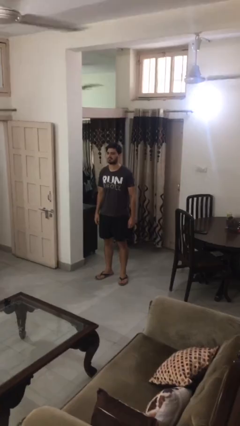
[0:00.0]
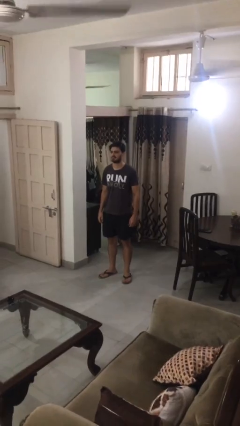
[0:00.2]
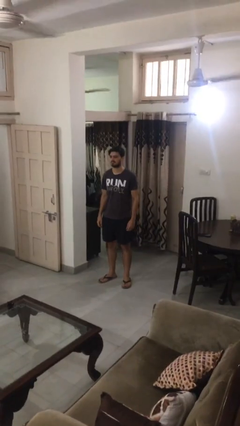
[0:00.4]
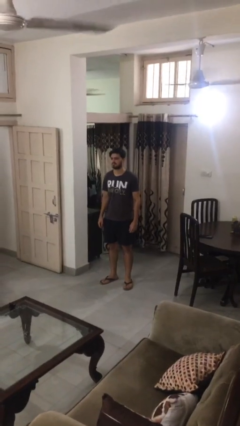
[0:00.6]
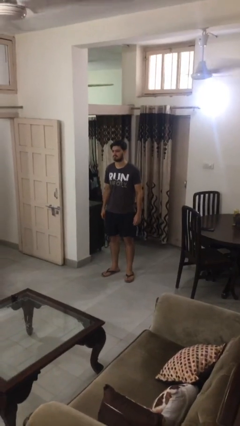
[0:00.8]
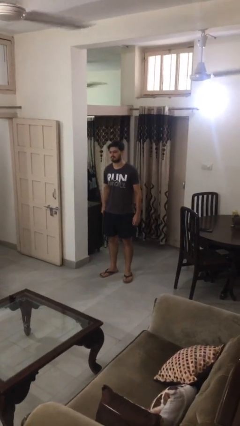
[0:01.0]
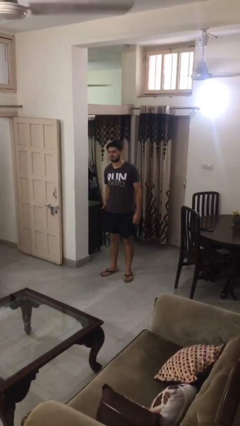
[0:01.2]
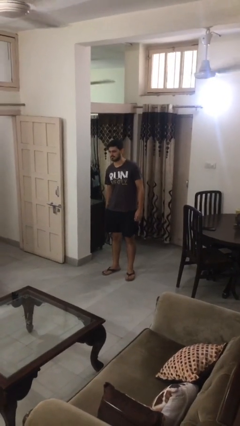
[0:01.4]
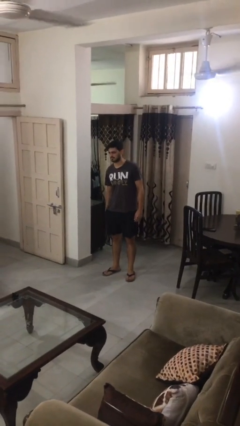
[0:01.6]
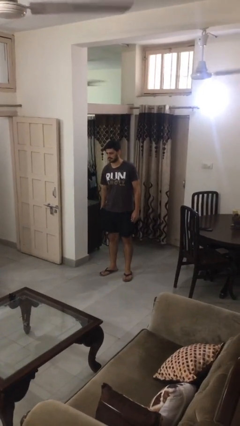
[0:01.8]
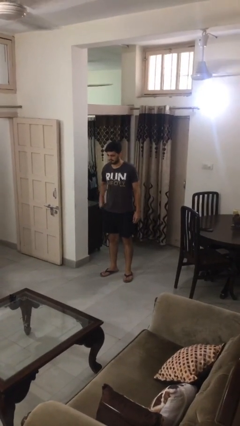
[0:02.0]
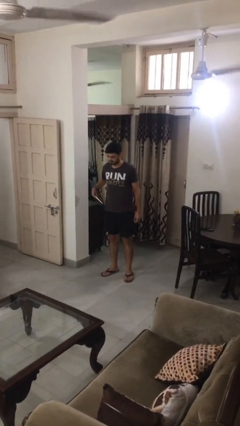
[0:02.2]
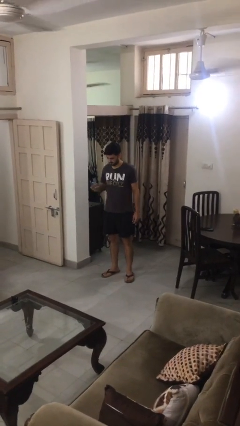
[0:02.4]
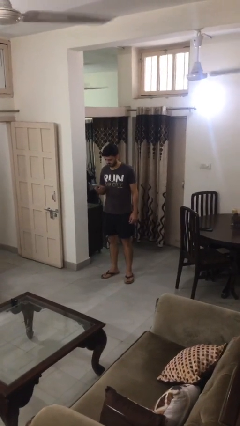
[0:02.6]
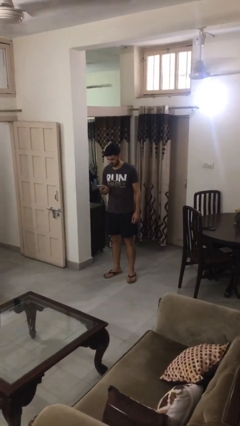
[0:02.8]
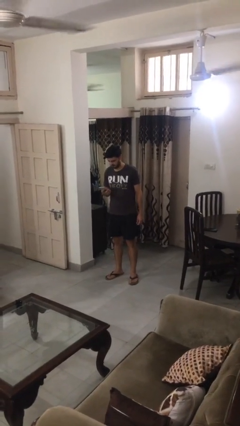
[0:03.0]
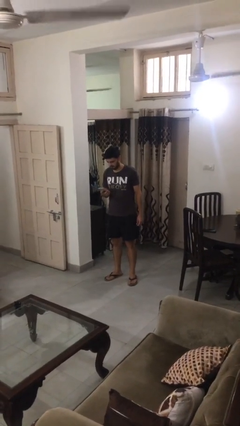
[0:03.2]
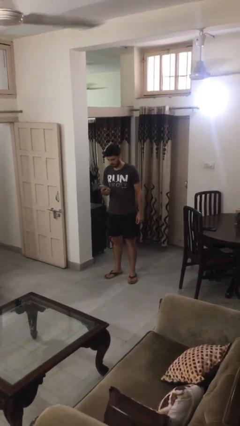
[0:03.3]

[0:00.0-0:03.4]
person takes phone from pocket

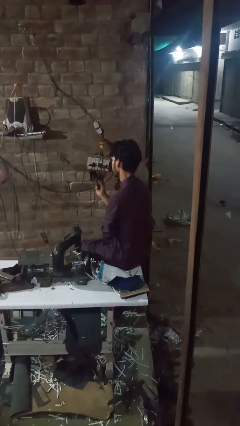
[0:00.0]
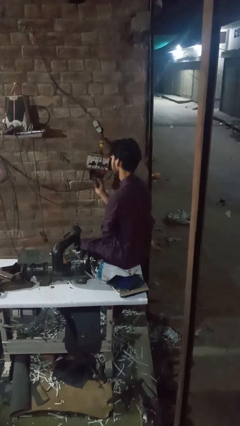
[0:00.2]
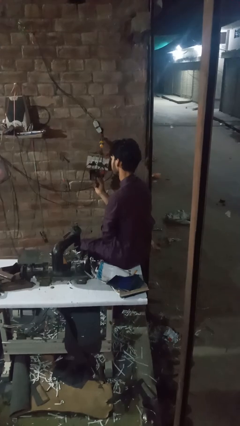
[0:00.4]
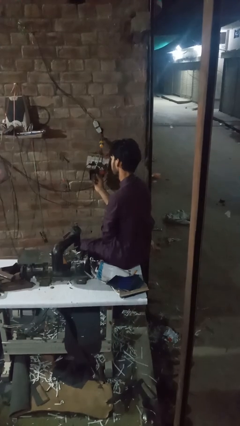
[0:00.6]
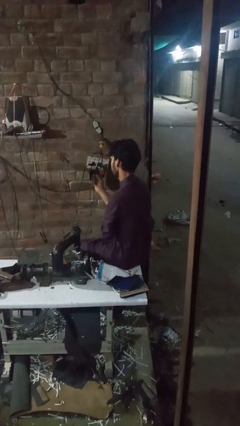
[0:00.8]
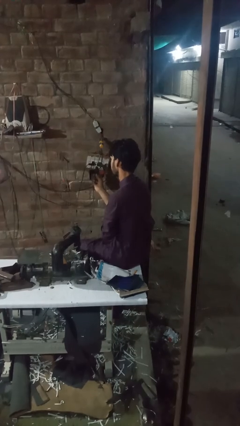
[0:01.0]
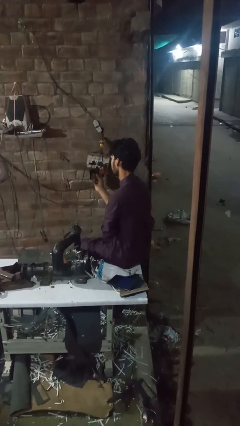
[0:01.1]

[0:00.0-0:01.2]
person unplugs from electrical socket

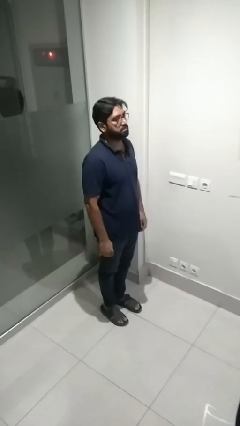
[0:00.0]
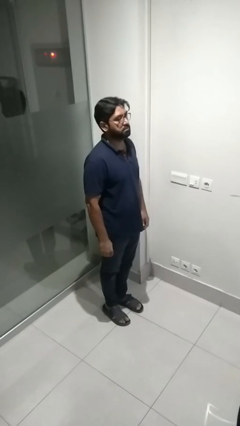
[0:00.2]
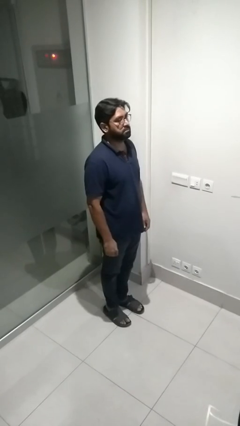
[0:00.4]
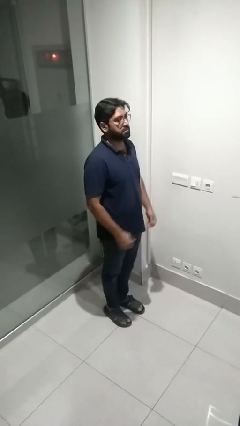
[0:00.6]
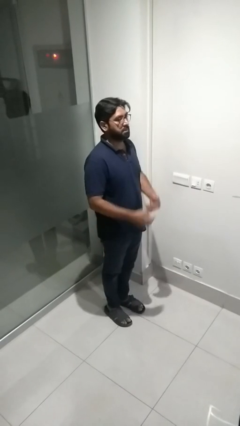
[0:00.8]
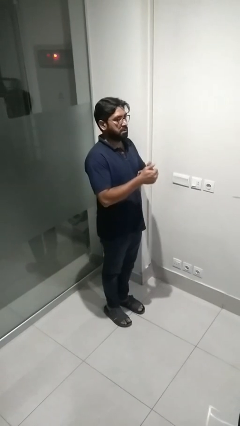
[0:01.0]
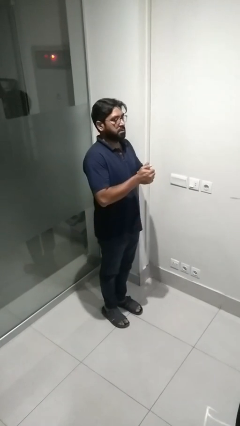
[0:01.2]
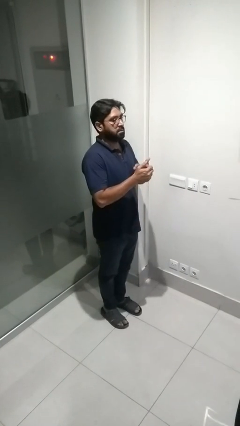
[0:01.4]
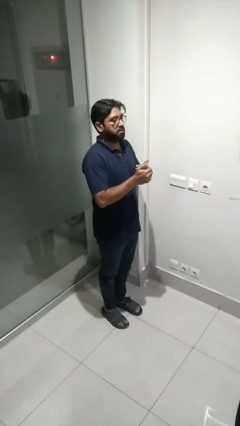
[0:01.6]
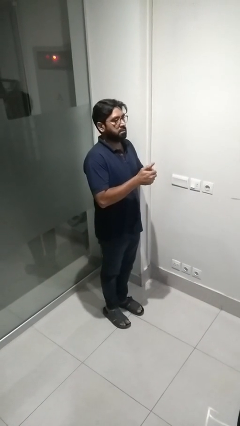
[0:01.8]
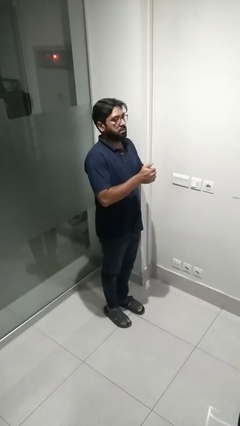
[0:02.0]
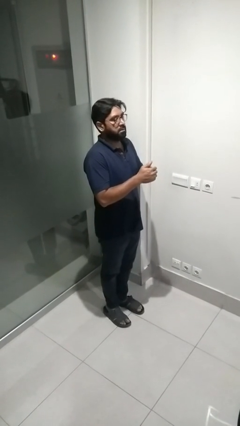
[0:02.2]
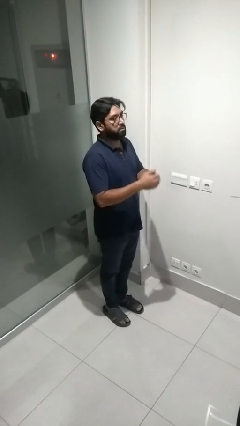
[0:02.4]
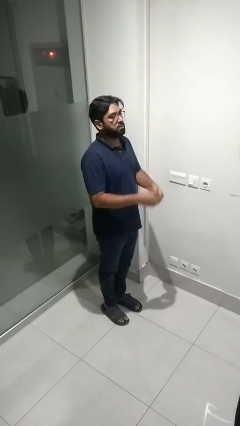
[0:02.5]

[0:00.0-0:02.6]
person cracks knuckles

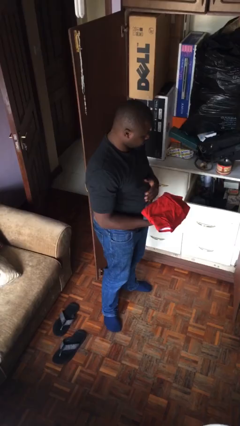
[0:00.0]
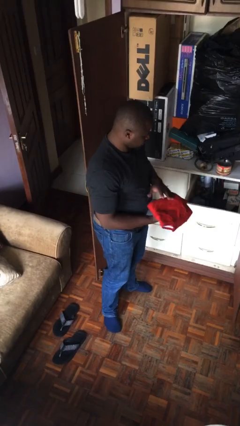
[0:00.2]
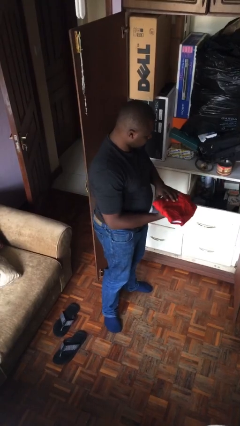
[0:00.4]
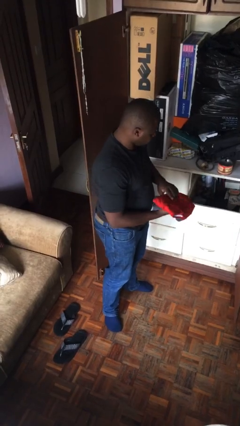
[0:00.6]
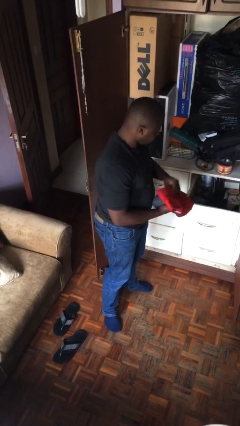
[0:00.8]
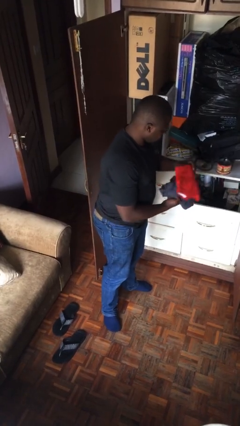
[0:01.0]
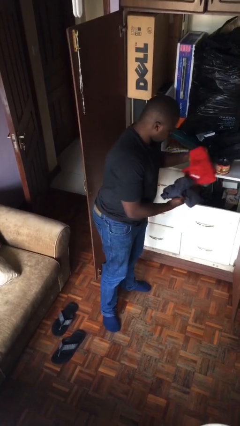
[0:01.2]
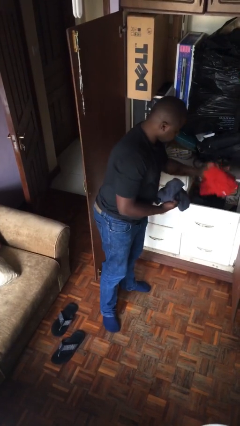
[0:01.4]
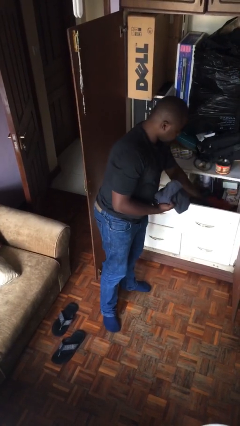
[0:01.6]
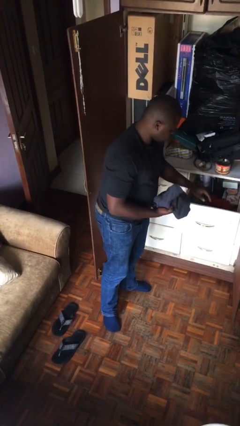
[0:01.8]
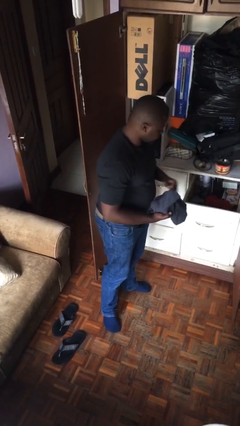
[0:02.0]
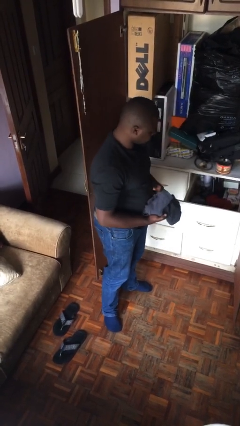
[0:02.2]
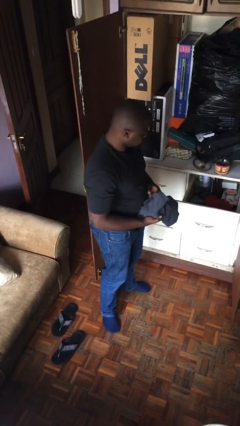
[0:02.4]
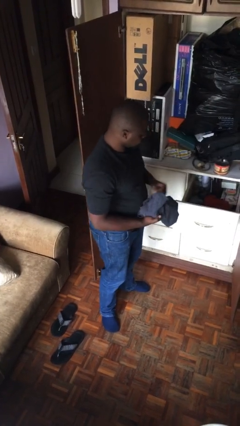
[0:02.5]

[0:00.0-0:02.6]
person puts clothes into dresser

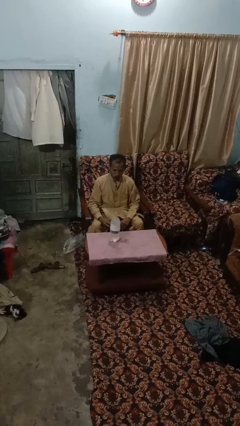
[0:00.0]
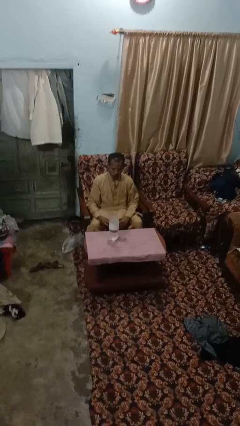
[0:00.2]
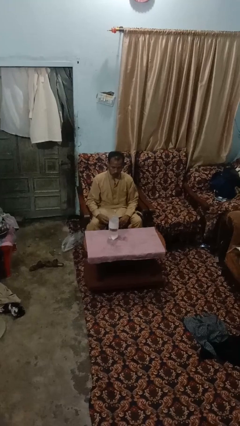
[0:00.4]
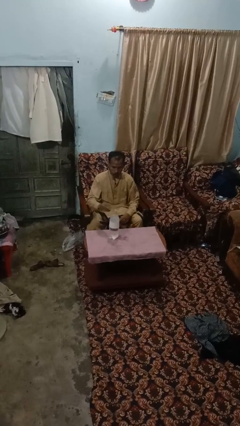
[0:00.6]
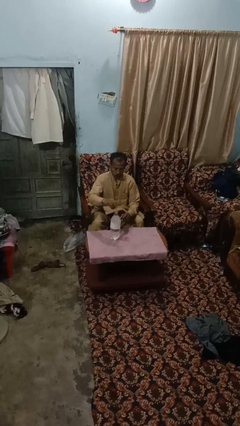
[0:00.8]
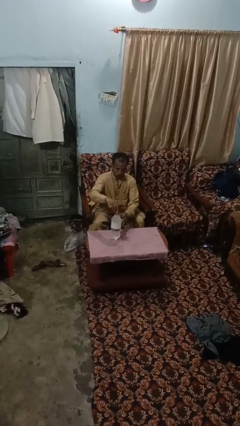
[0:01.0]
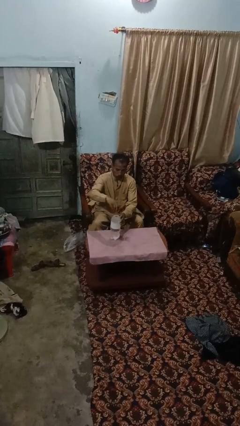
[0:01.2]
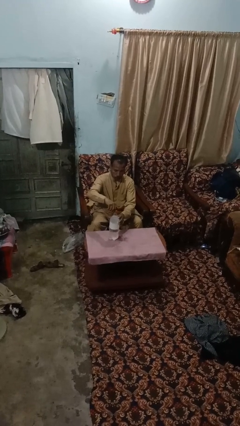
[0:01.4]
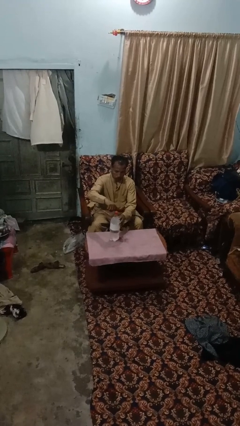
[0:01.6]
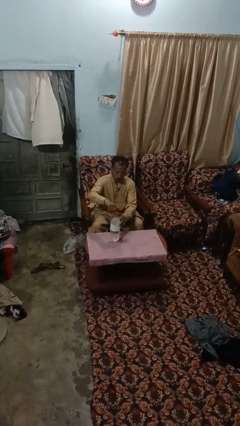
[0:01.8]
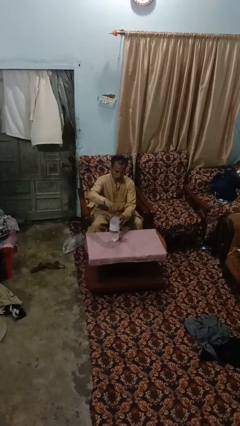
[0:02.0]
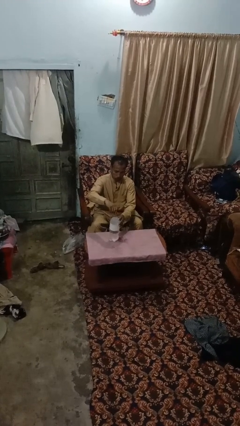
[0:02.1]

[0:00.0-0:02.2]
person screws lid to bottle

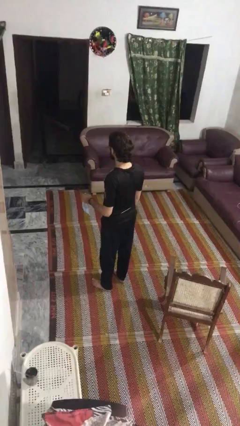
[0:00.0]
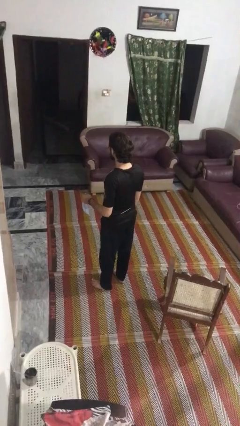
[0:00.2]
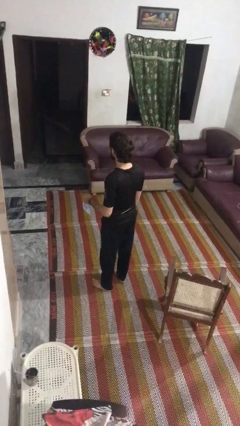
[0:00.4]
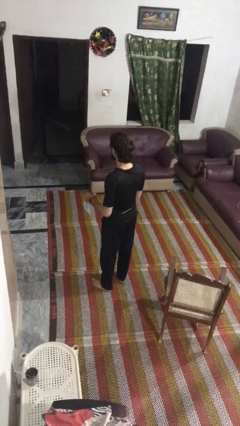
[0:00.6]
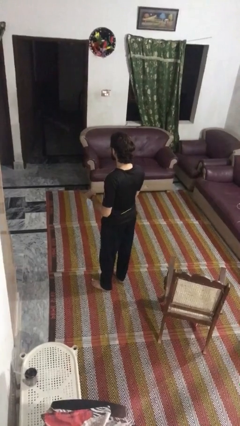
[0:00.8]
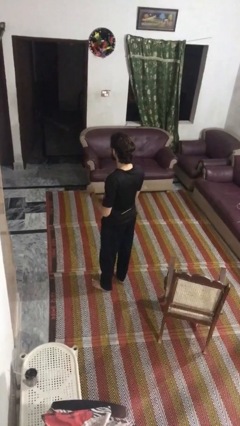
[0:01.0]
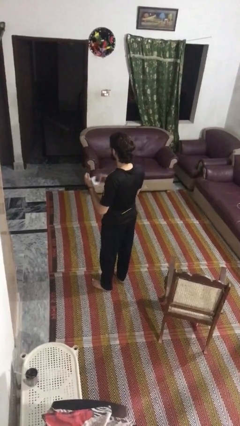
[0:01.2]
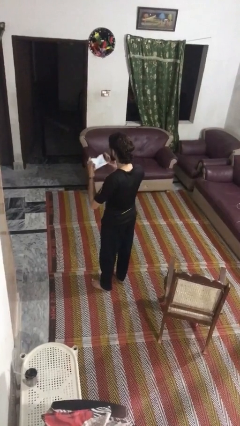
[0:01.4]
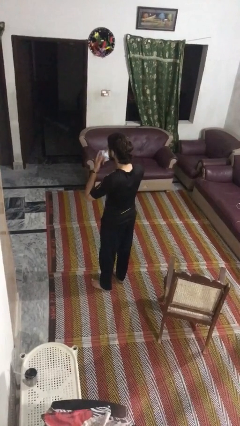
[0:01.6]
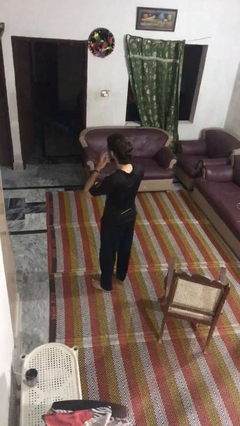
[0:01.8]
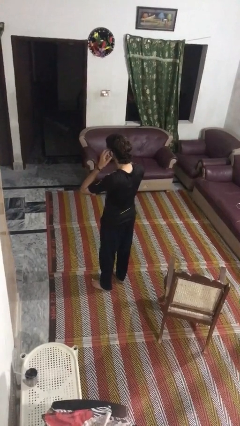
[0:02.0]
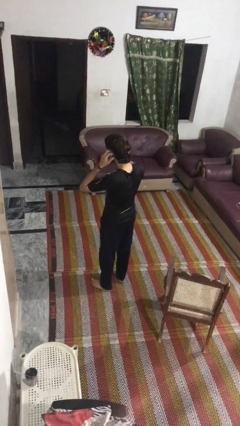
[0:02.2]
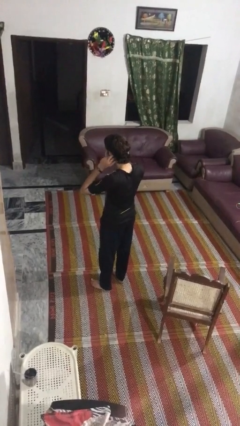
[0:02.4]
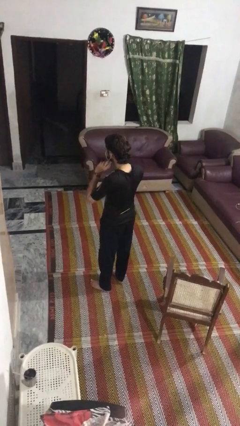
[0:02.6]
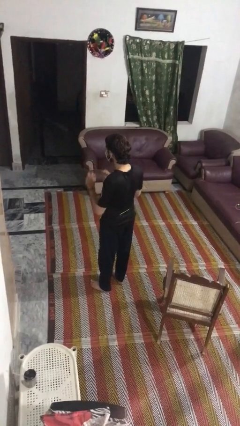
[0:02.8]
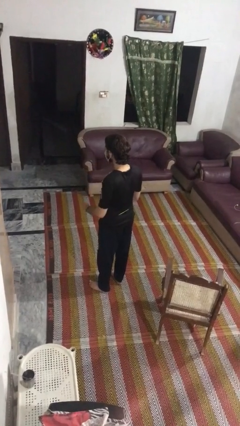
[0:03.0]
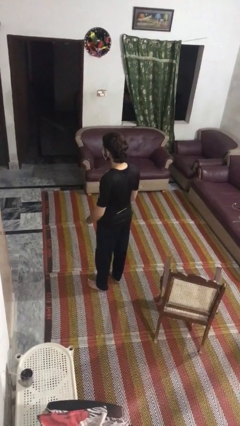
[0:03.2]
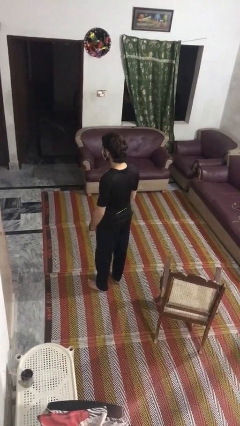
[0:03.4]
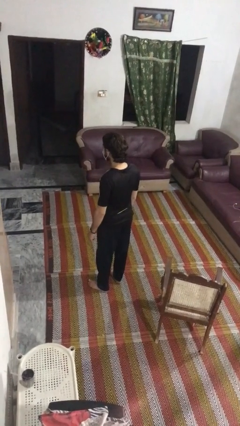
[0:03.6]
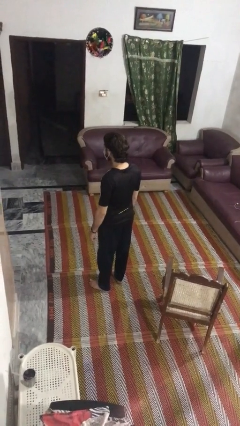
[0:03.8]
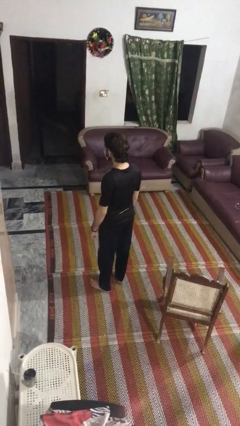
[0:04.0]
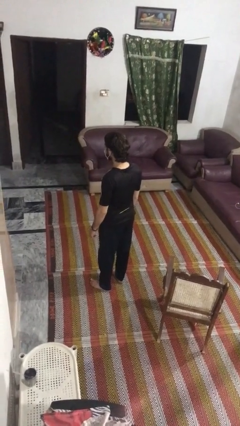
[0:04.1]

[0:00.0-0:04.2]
person puts on facemask

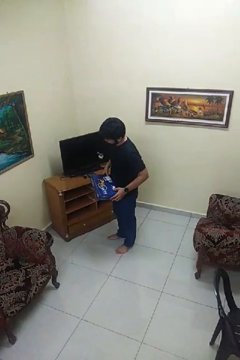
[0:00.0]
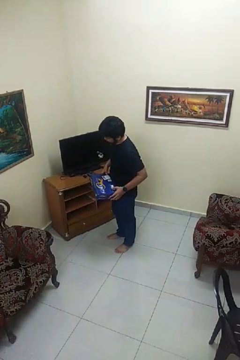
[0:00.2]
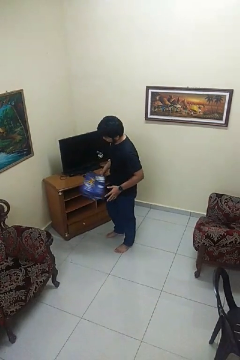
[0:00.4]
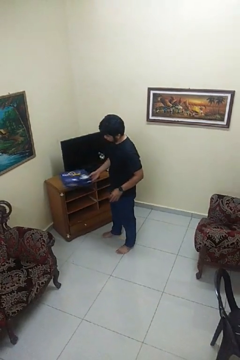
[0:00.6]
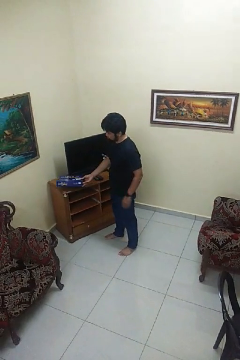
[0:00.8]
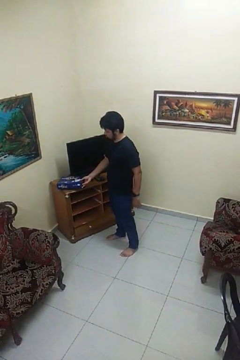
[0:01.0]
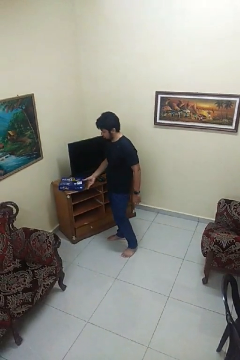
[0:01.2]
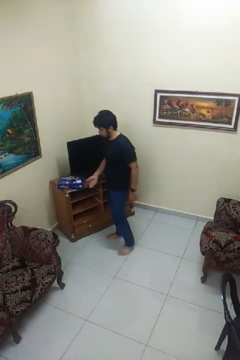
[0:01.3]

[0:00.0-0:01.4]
person puts down object on countertop

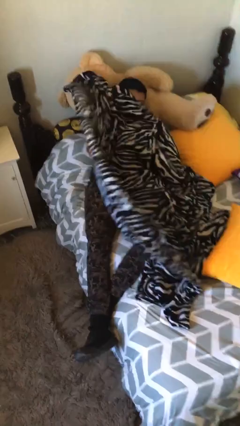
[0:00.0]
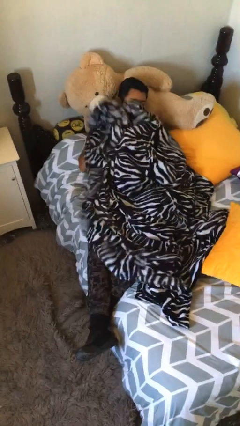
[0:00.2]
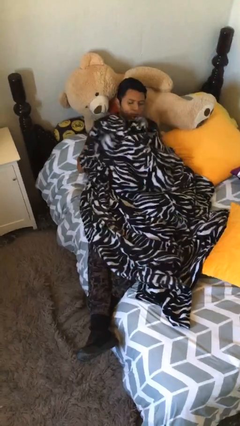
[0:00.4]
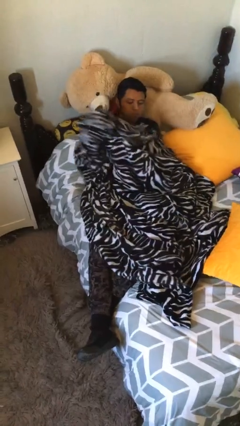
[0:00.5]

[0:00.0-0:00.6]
person covers with bedsheets
